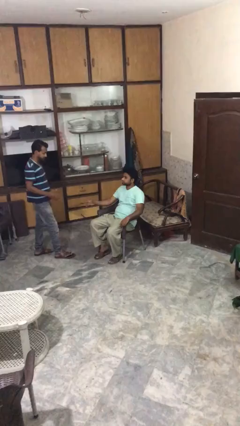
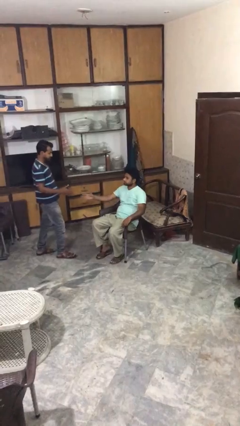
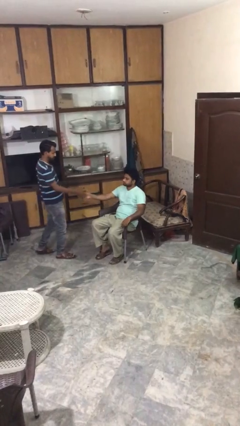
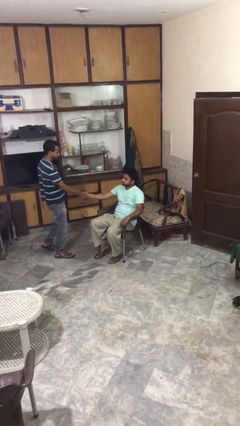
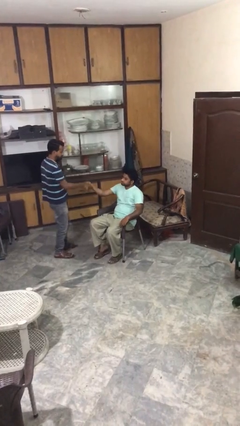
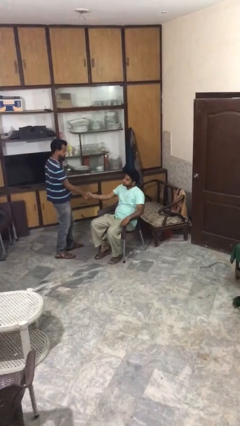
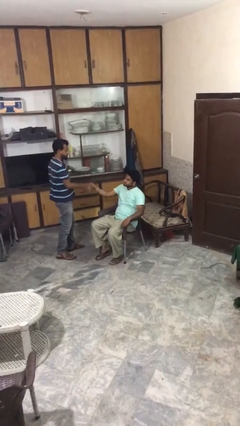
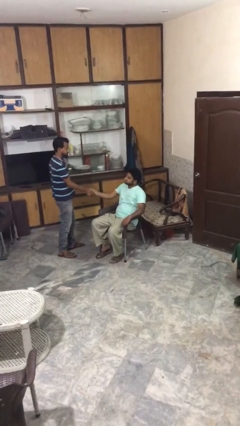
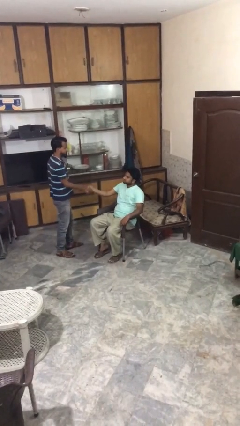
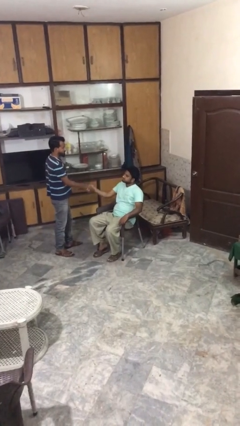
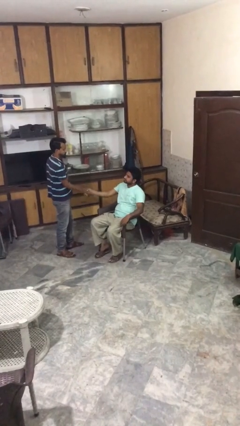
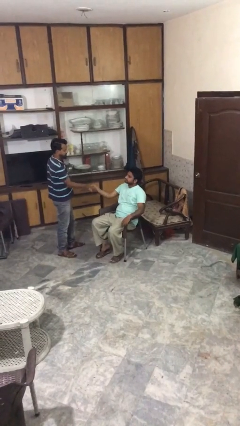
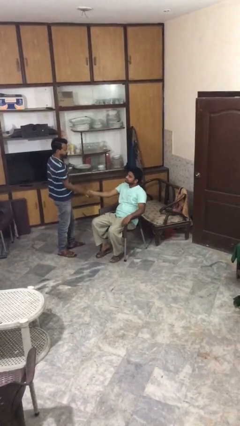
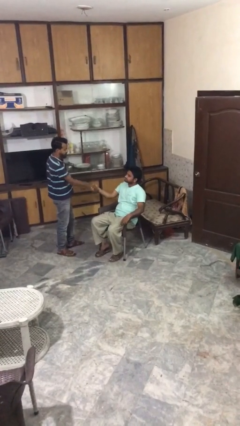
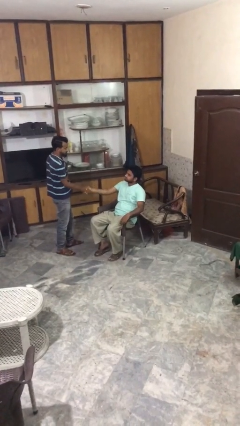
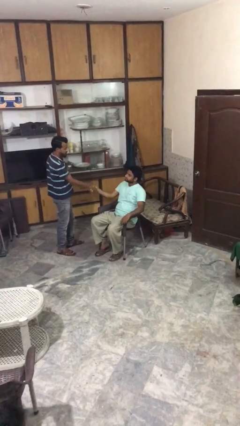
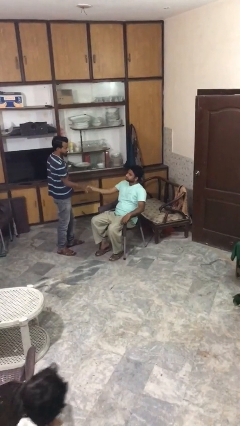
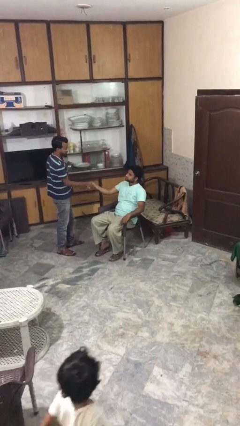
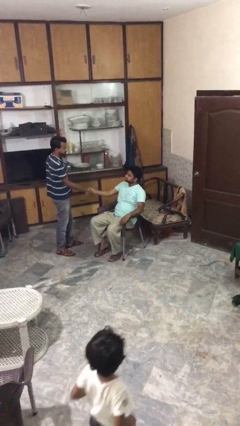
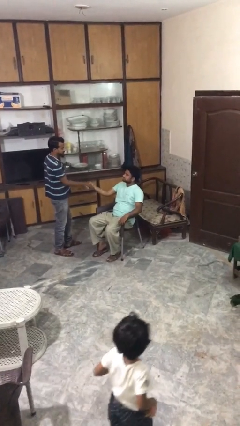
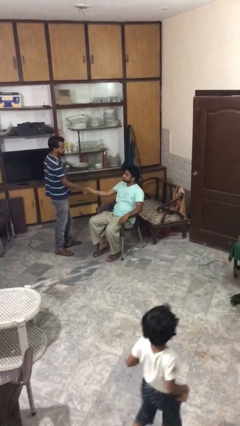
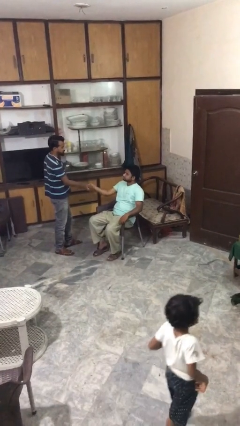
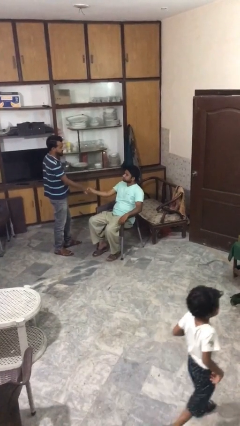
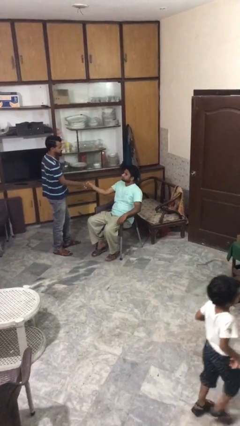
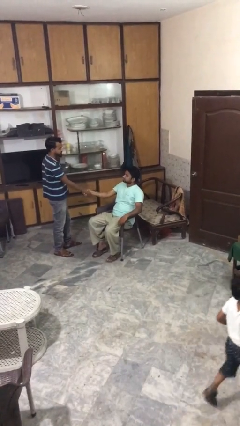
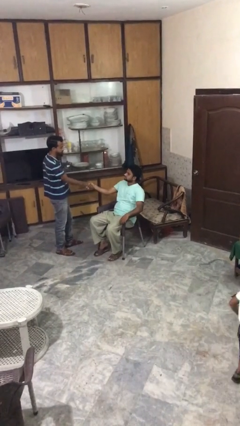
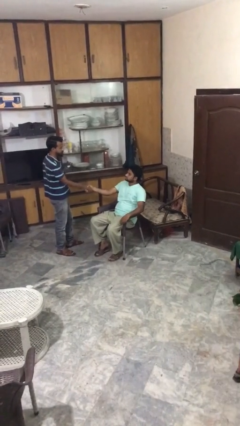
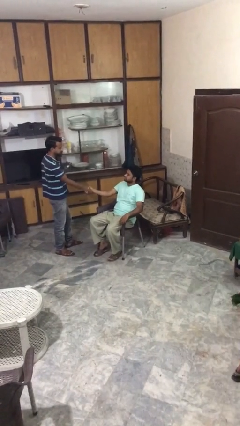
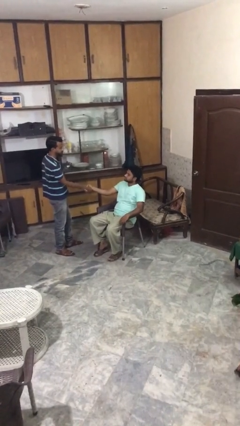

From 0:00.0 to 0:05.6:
person shakes hand

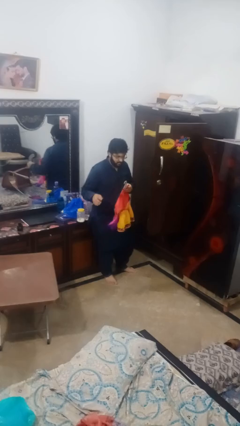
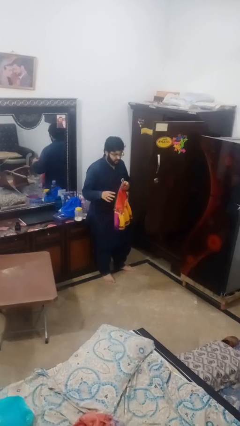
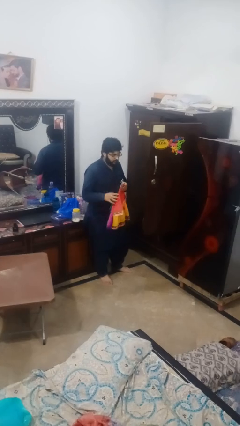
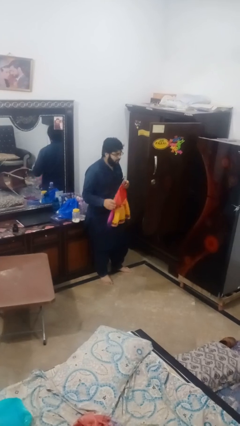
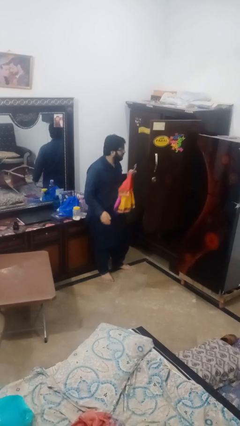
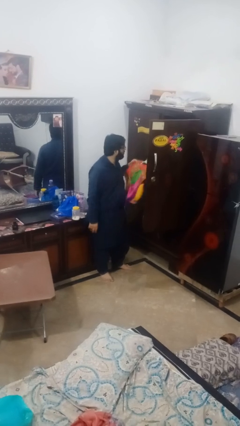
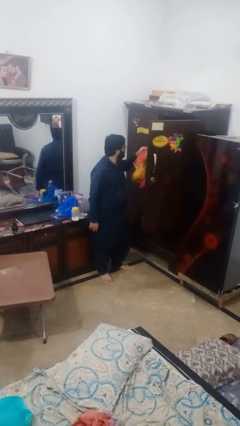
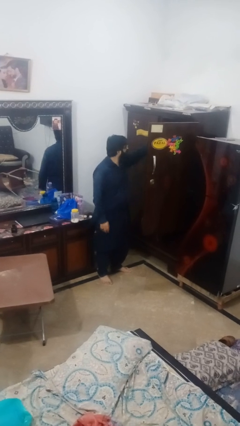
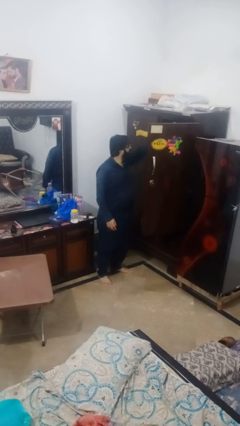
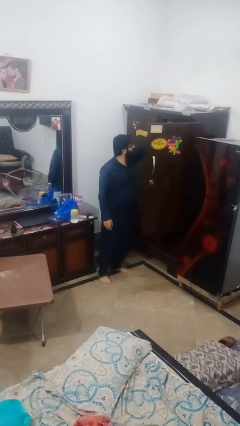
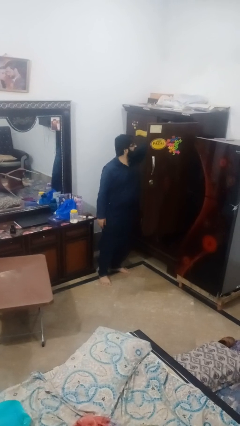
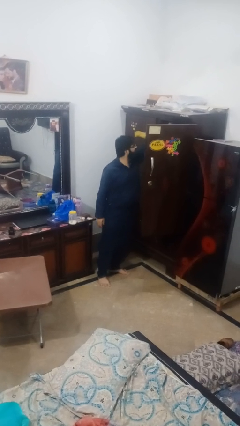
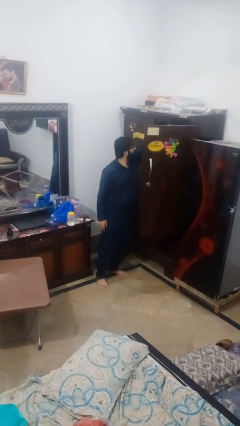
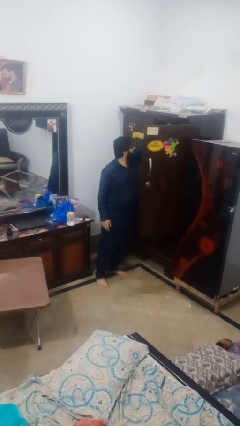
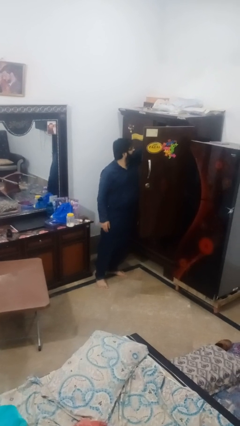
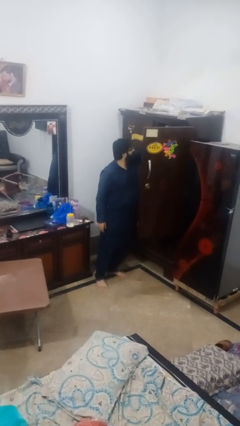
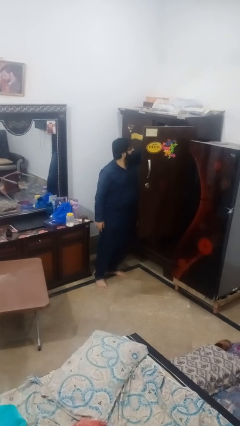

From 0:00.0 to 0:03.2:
person puts clothes into closet

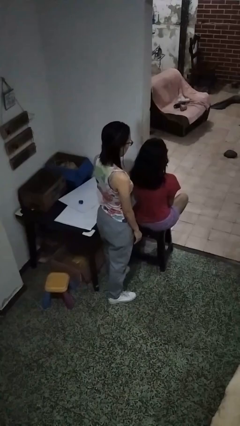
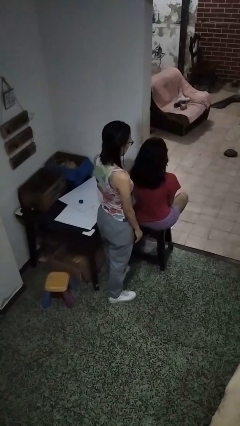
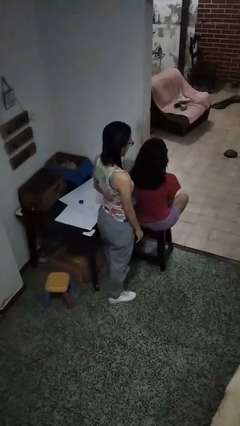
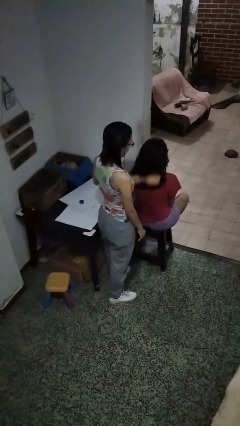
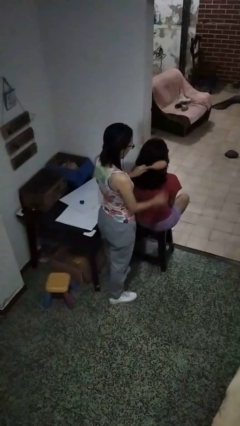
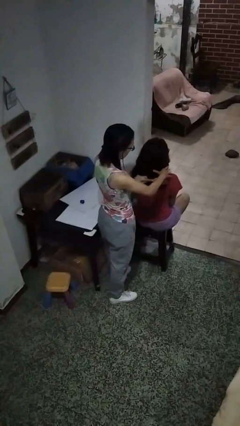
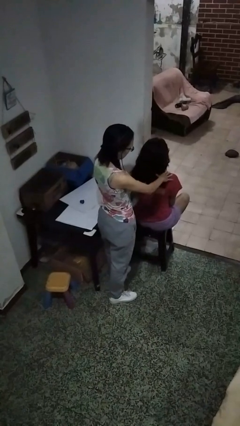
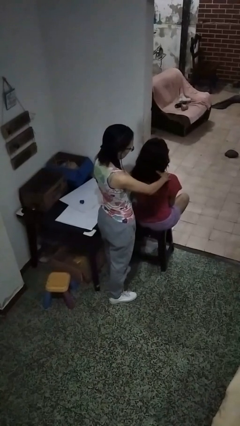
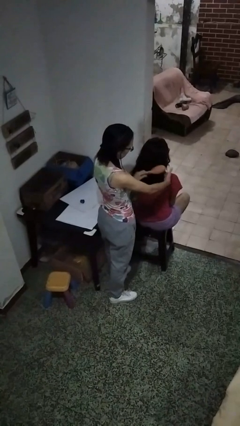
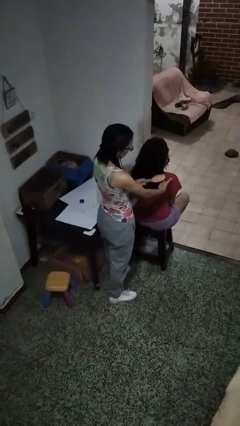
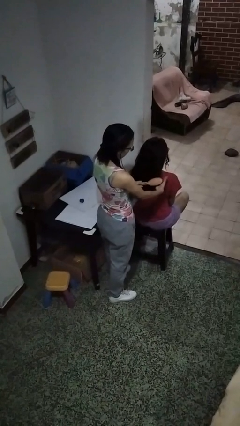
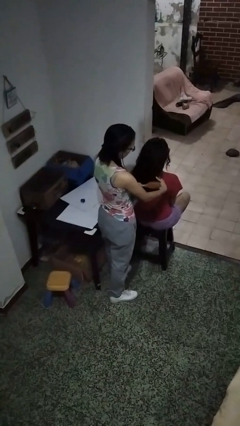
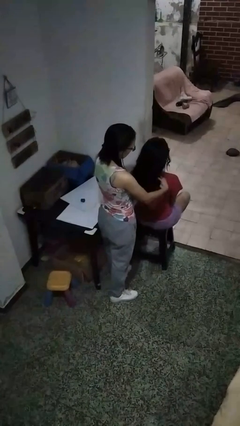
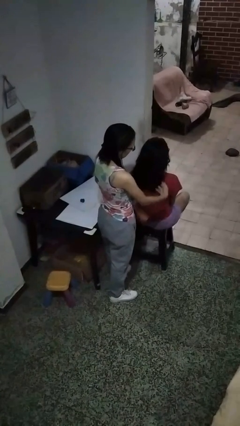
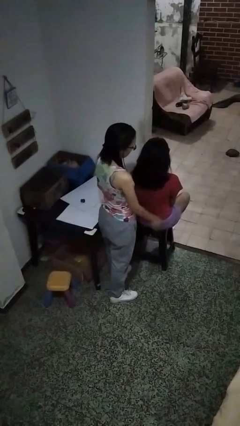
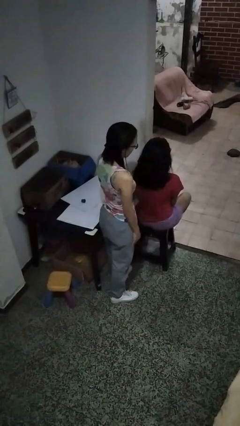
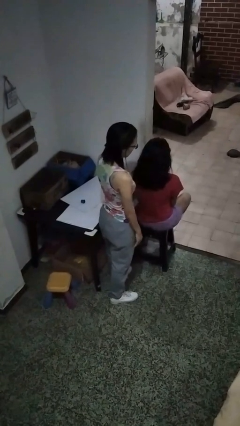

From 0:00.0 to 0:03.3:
person brushes hair of person

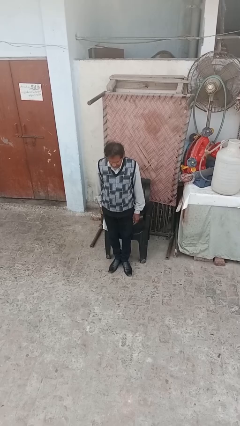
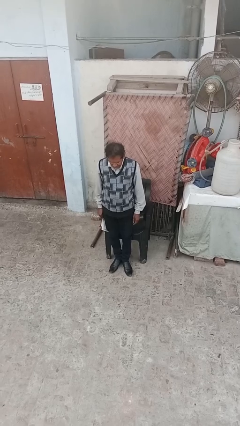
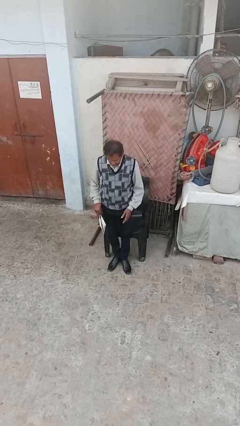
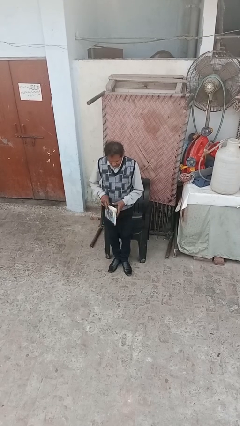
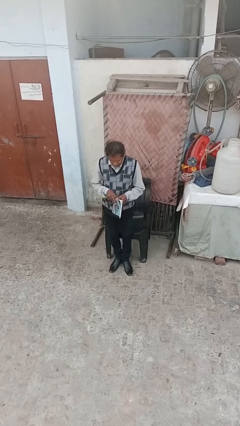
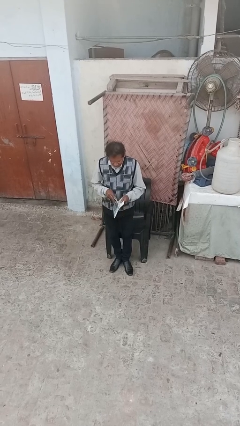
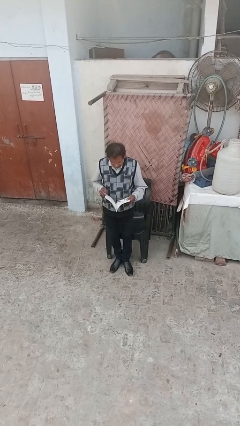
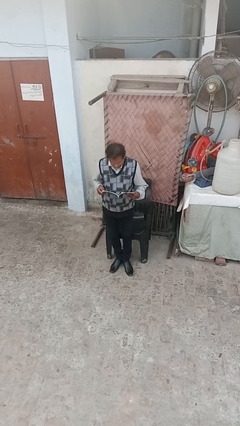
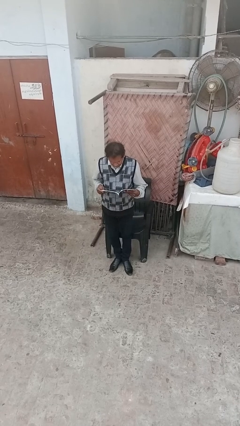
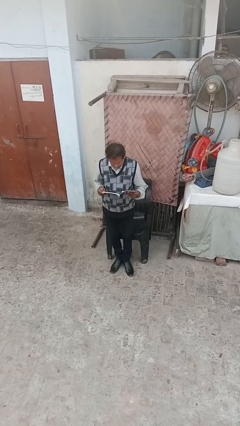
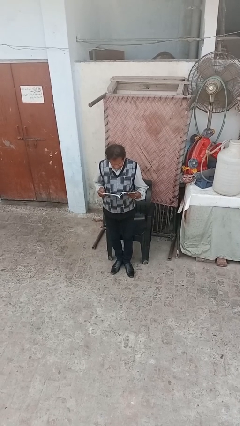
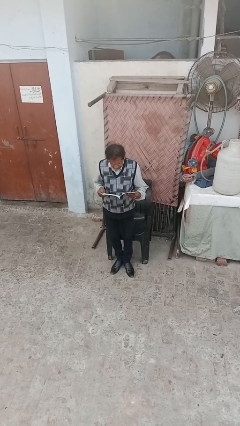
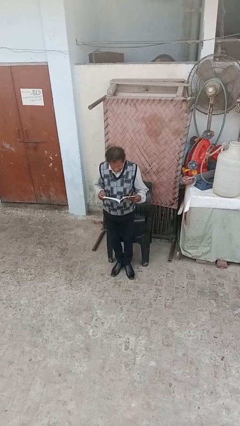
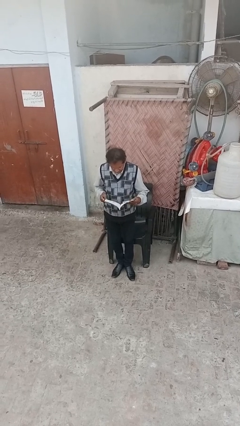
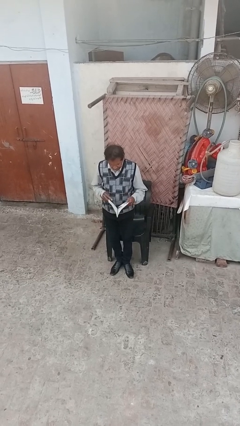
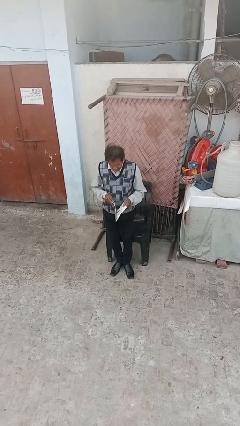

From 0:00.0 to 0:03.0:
person reads document

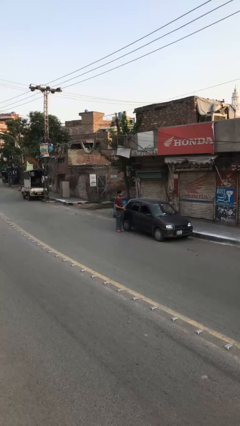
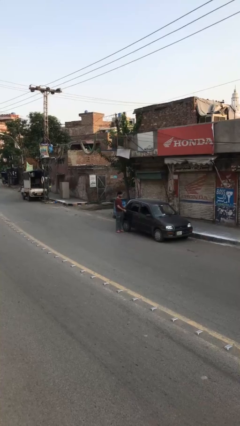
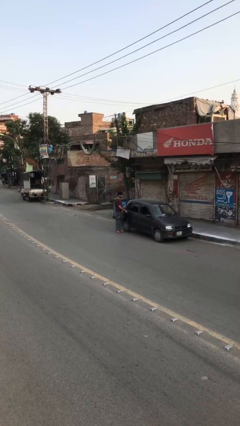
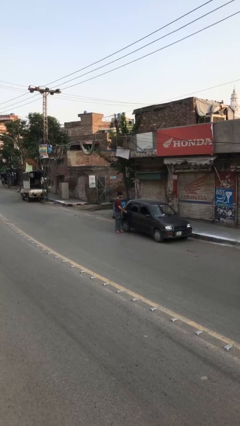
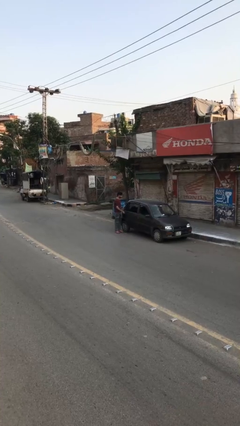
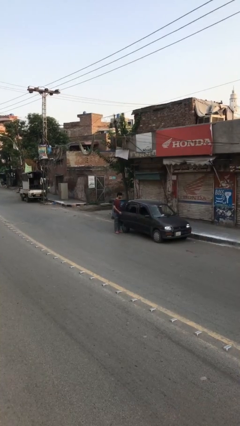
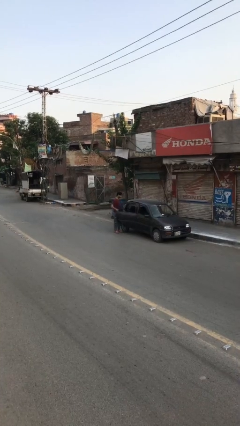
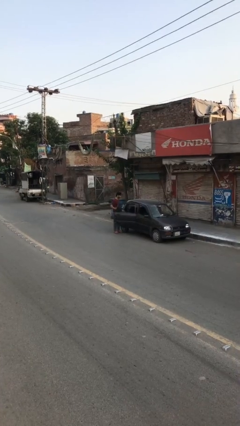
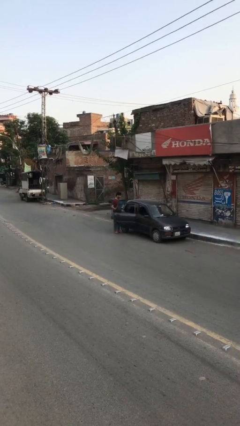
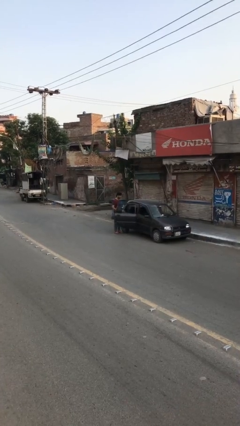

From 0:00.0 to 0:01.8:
person opens car door

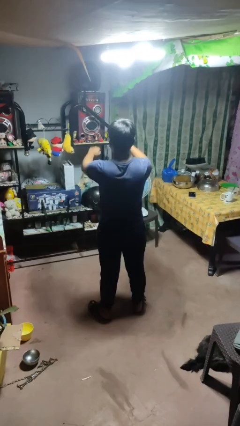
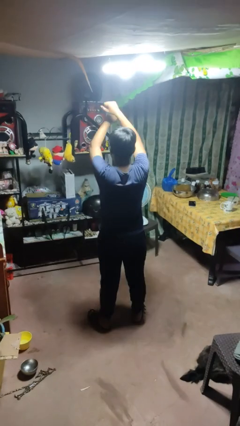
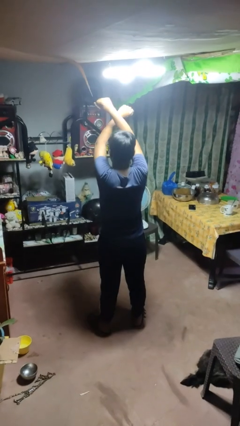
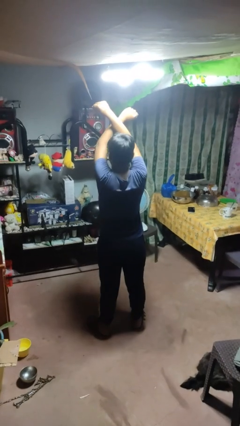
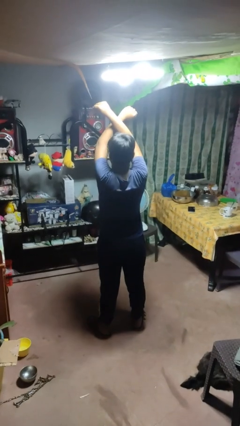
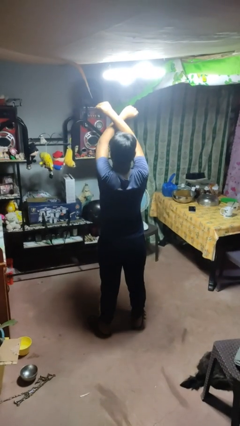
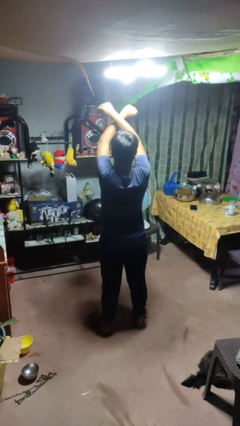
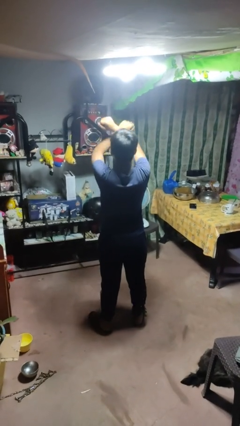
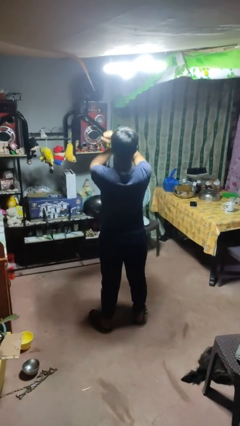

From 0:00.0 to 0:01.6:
person gestures arms x
